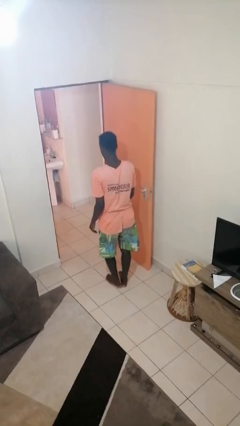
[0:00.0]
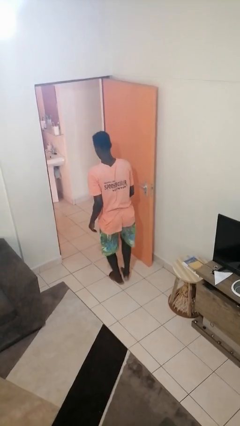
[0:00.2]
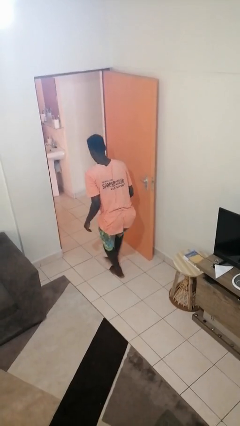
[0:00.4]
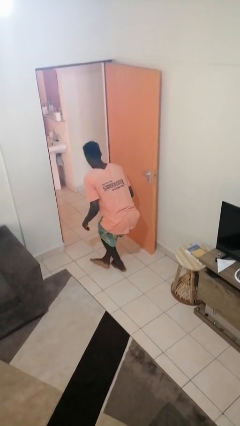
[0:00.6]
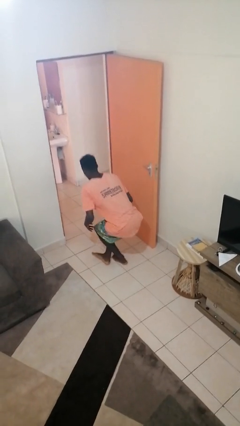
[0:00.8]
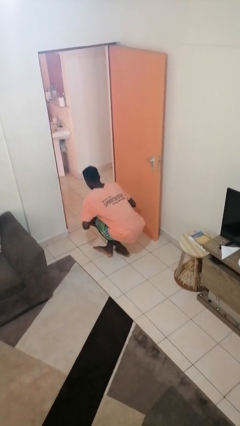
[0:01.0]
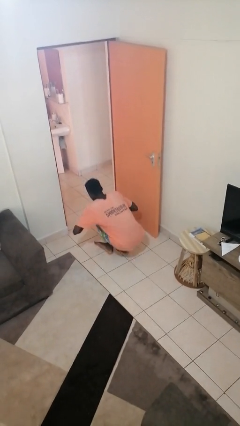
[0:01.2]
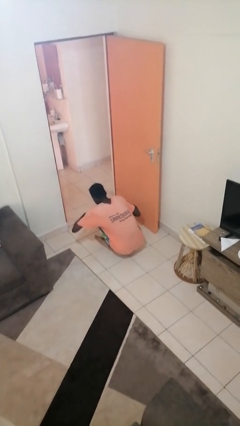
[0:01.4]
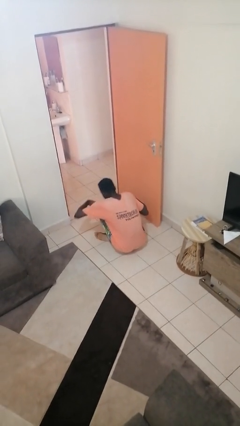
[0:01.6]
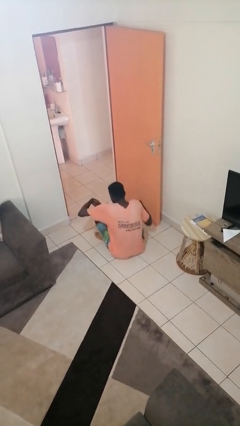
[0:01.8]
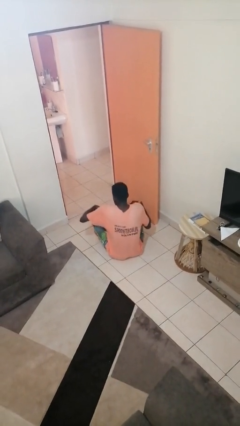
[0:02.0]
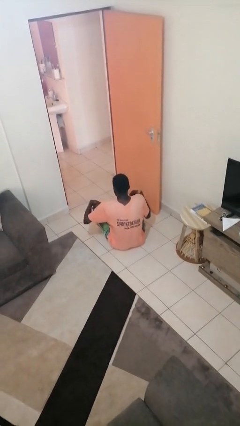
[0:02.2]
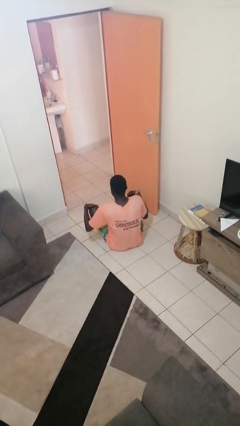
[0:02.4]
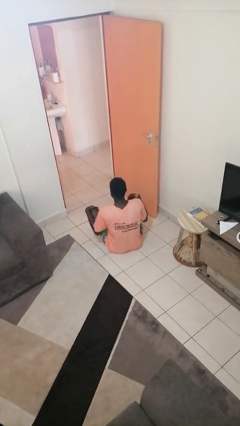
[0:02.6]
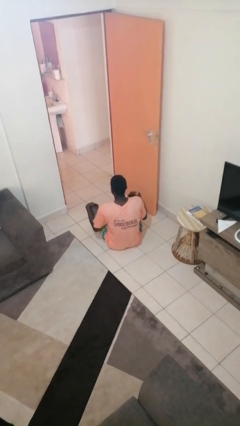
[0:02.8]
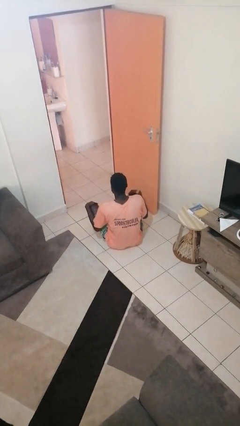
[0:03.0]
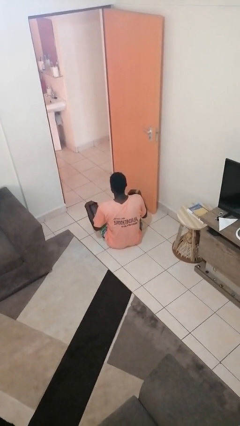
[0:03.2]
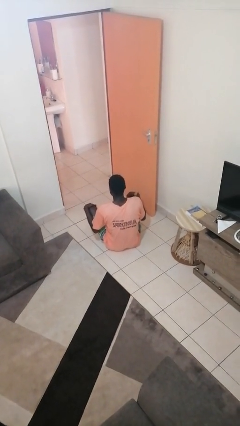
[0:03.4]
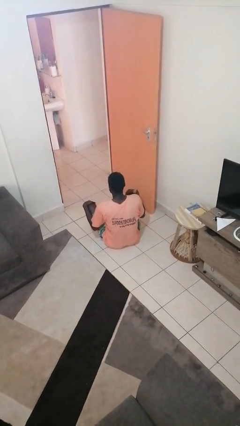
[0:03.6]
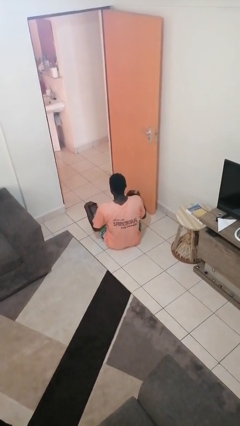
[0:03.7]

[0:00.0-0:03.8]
person sits crisscross

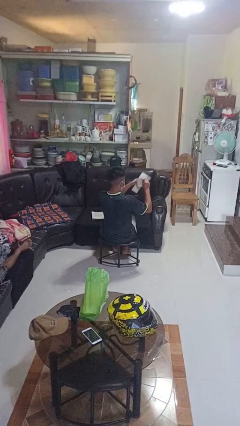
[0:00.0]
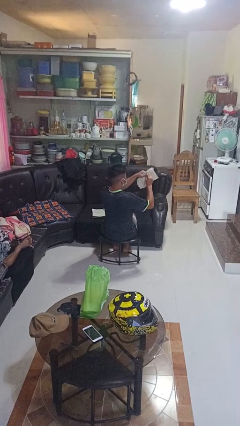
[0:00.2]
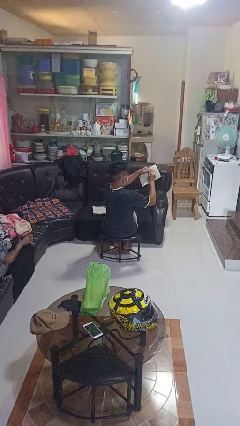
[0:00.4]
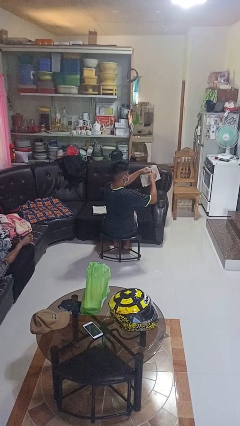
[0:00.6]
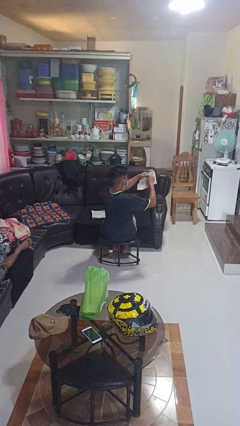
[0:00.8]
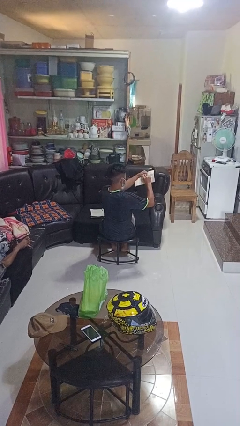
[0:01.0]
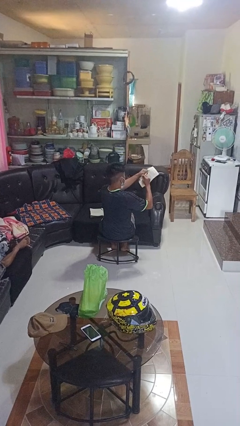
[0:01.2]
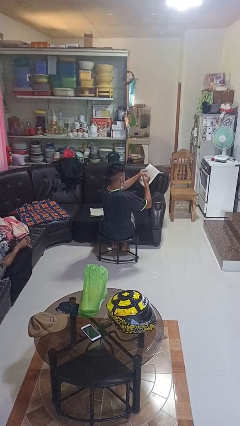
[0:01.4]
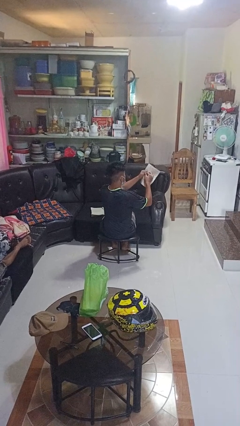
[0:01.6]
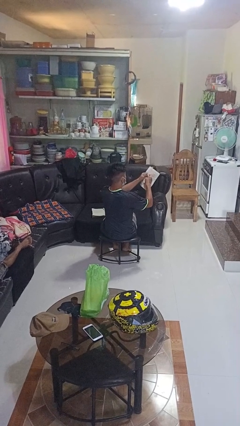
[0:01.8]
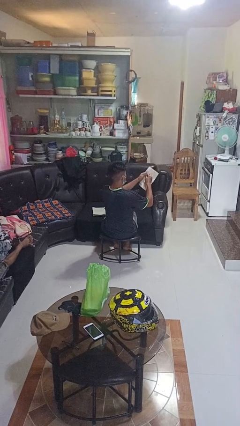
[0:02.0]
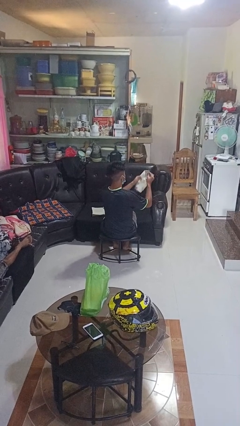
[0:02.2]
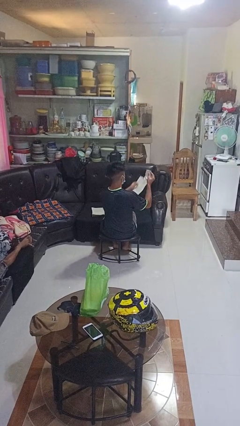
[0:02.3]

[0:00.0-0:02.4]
person tears paper

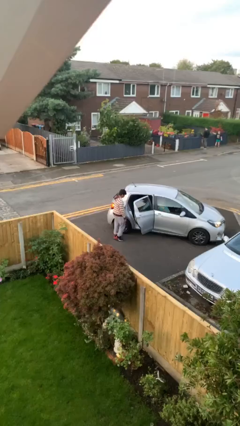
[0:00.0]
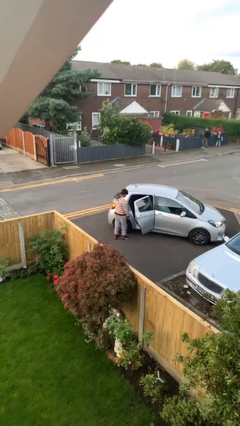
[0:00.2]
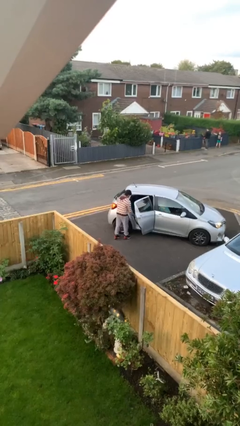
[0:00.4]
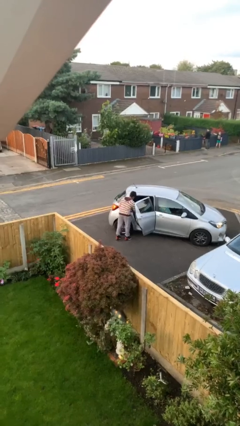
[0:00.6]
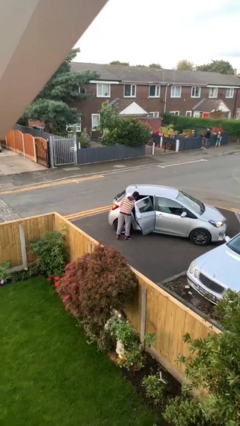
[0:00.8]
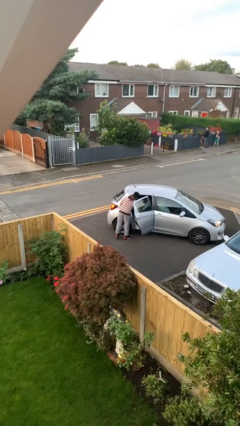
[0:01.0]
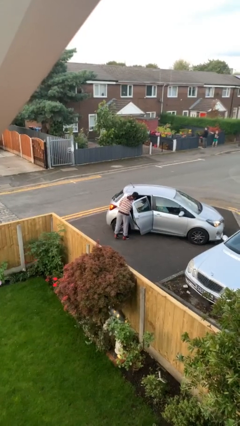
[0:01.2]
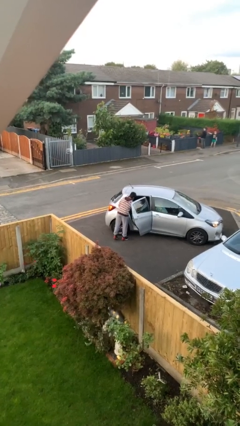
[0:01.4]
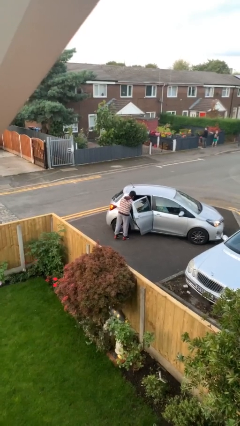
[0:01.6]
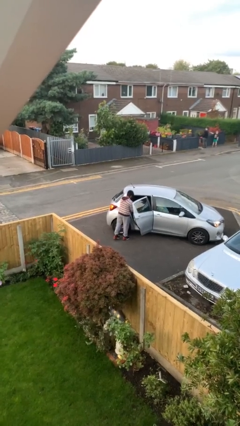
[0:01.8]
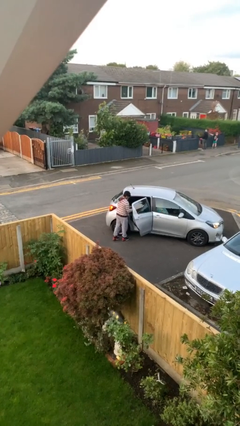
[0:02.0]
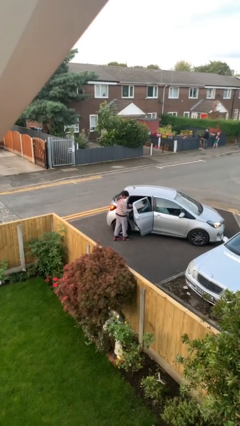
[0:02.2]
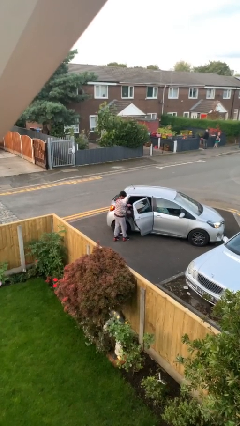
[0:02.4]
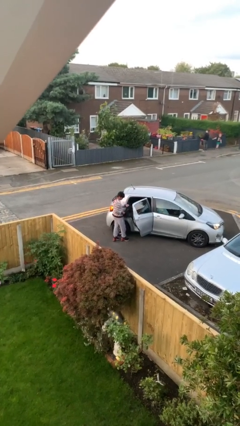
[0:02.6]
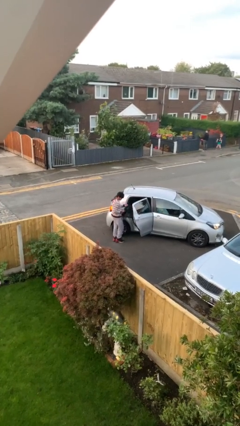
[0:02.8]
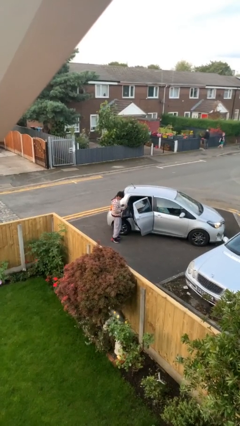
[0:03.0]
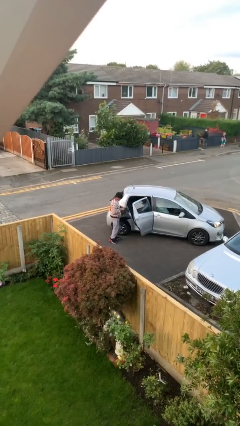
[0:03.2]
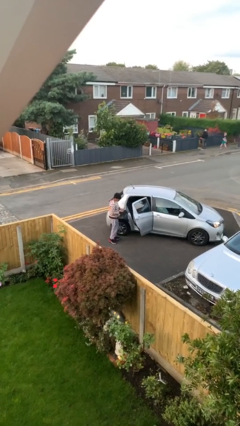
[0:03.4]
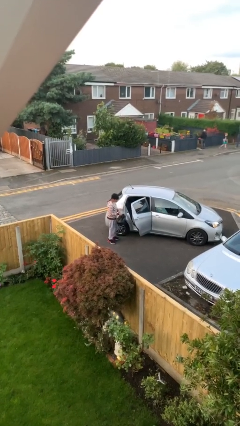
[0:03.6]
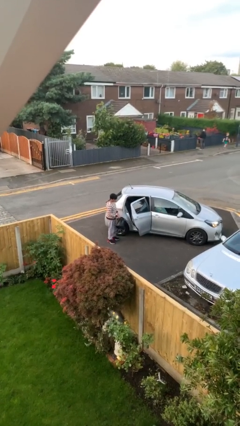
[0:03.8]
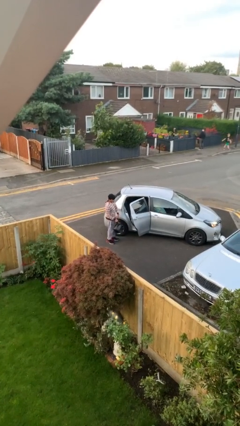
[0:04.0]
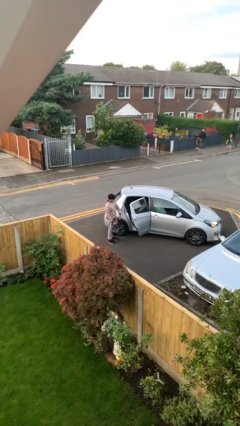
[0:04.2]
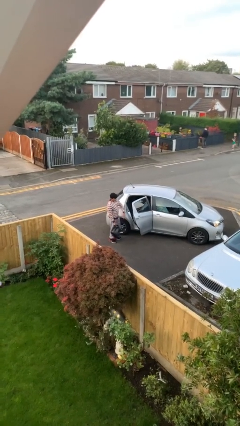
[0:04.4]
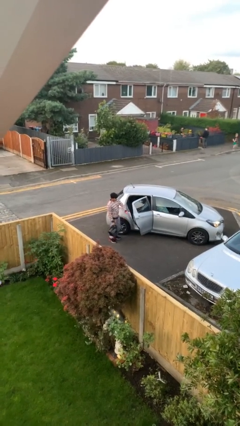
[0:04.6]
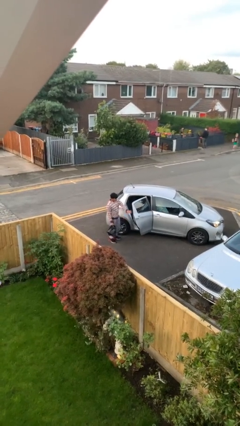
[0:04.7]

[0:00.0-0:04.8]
person unloads car

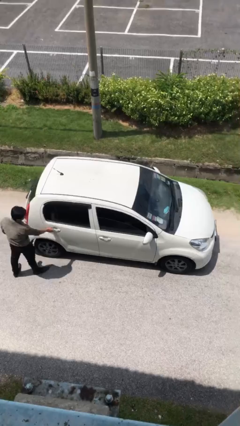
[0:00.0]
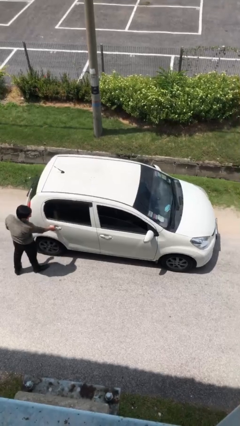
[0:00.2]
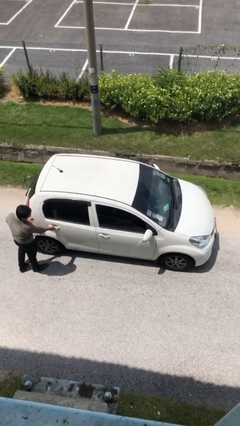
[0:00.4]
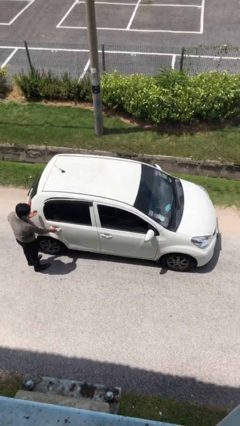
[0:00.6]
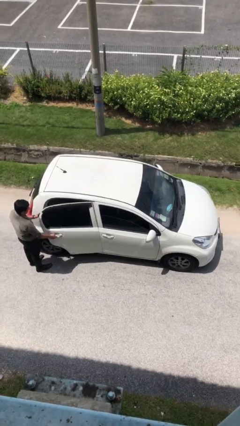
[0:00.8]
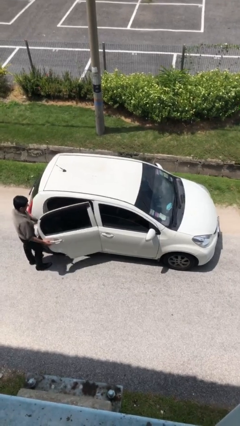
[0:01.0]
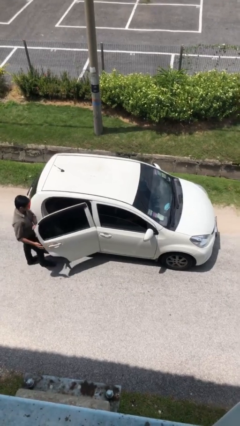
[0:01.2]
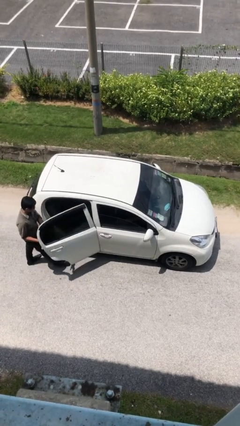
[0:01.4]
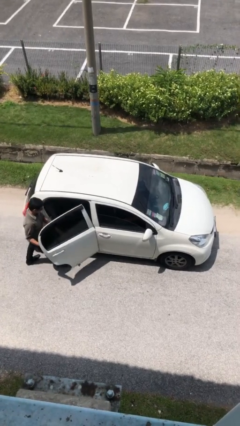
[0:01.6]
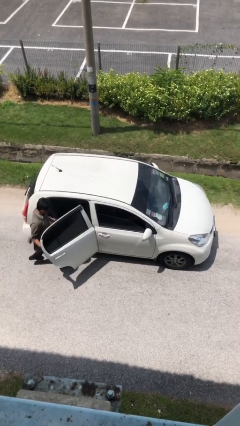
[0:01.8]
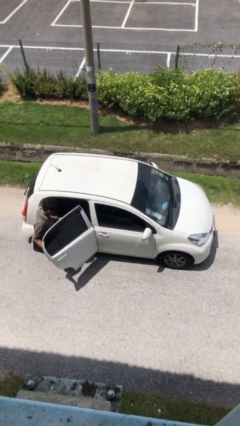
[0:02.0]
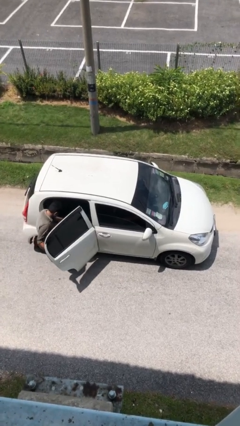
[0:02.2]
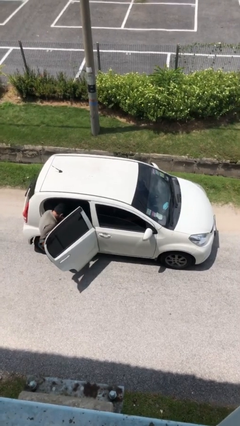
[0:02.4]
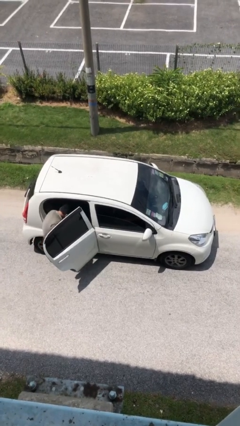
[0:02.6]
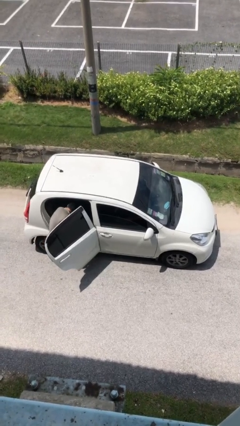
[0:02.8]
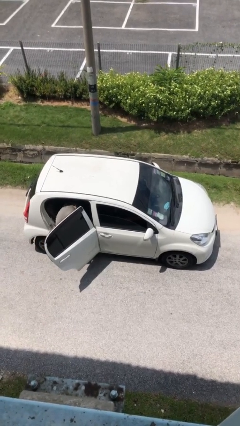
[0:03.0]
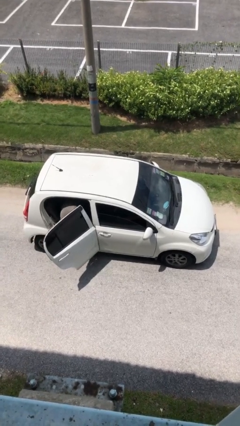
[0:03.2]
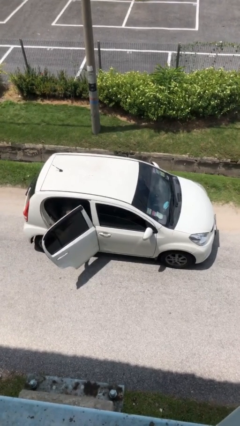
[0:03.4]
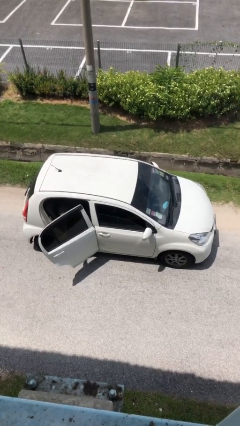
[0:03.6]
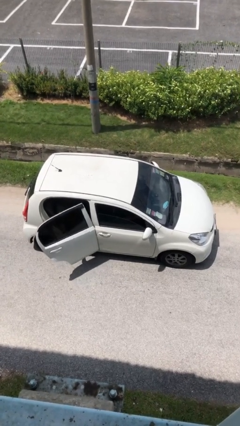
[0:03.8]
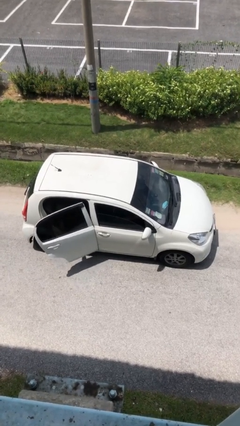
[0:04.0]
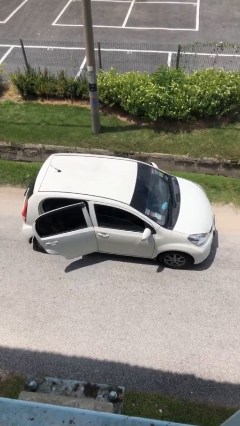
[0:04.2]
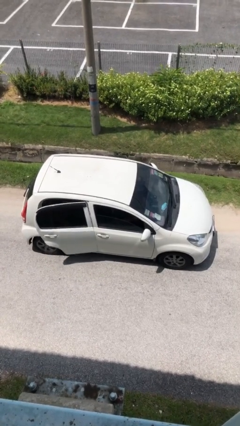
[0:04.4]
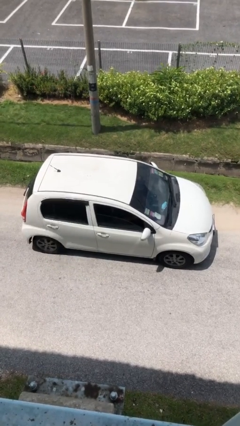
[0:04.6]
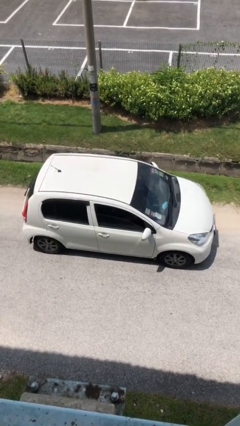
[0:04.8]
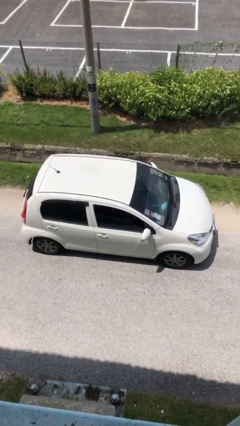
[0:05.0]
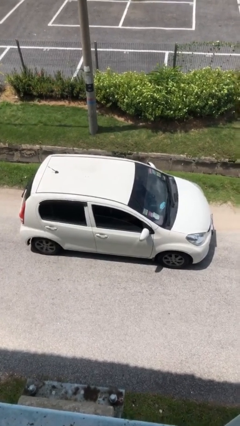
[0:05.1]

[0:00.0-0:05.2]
car picks up person

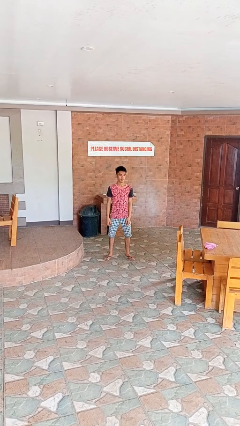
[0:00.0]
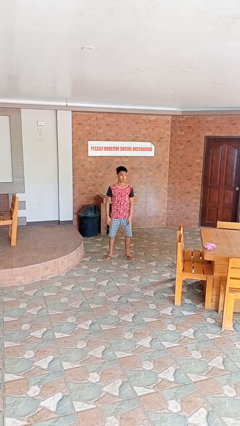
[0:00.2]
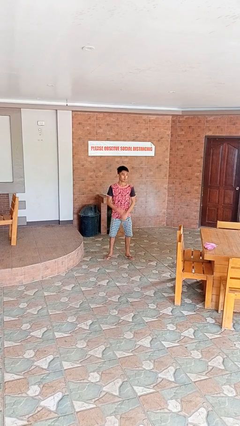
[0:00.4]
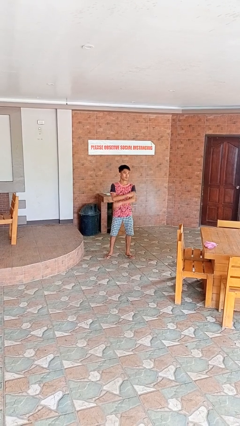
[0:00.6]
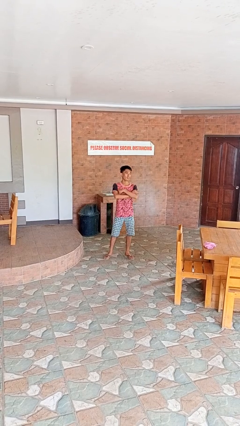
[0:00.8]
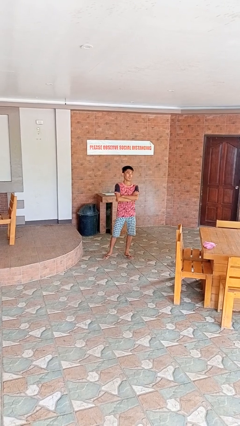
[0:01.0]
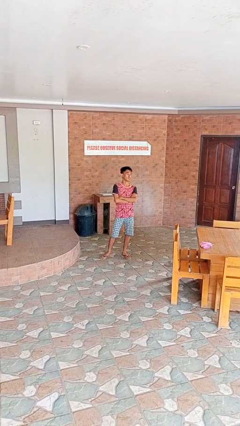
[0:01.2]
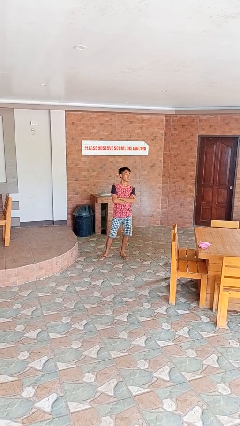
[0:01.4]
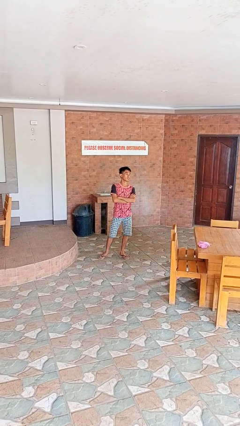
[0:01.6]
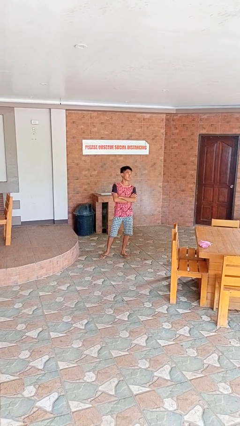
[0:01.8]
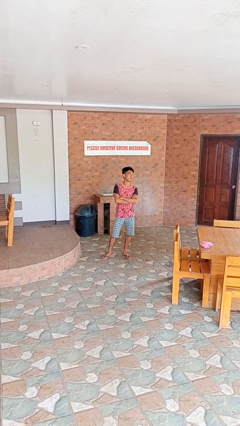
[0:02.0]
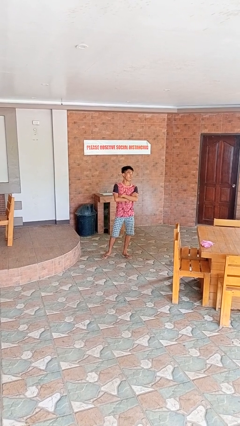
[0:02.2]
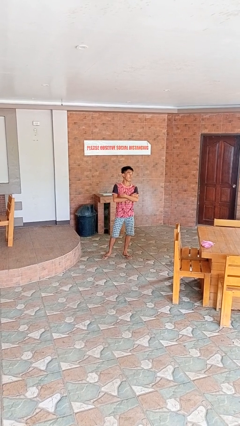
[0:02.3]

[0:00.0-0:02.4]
person crosses arms
